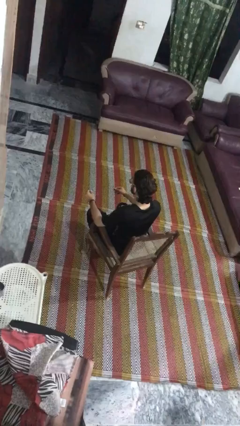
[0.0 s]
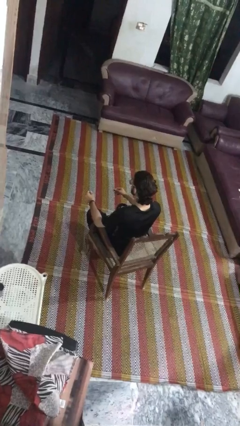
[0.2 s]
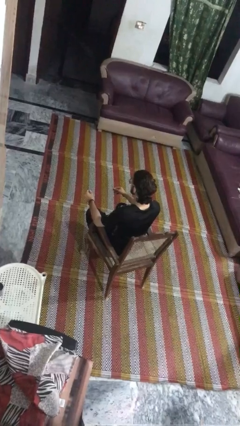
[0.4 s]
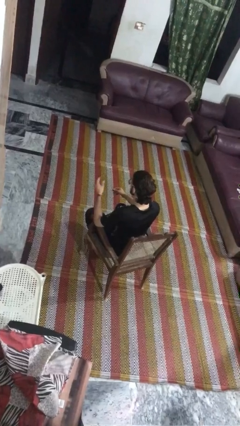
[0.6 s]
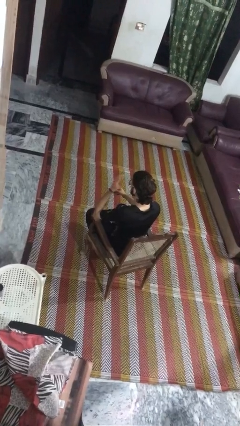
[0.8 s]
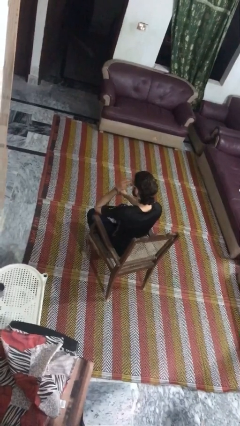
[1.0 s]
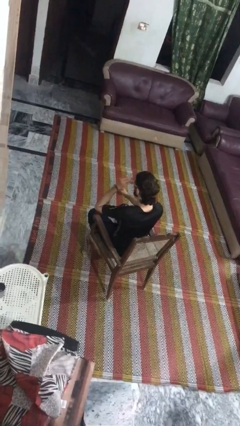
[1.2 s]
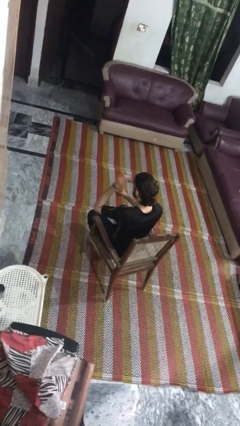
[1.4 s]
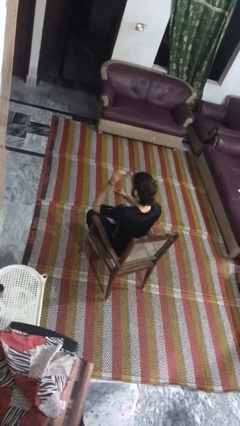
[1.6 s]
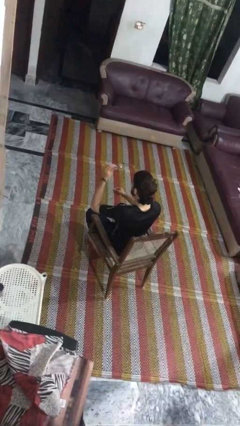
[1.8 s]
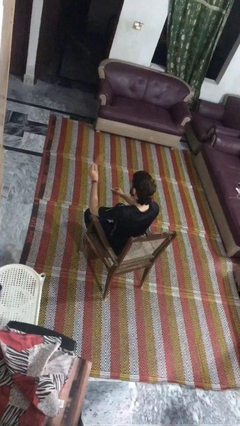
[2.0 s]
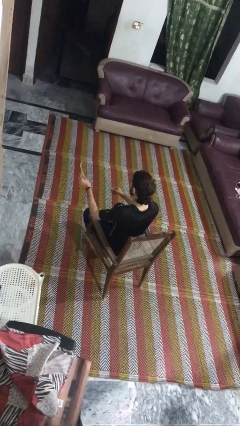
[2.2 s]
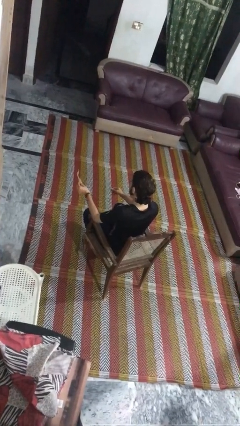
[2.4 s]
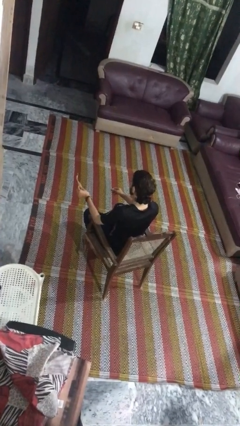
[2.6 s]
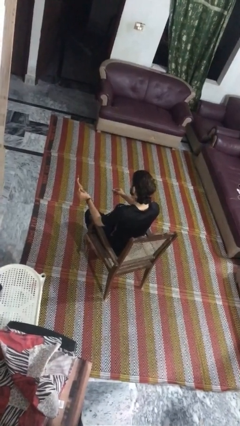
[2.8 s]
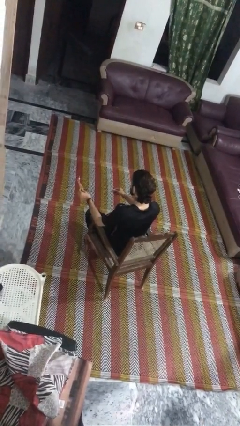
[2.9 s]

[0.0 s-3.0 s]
person takes off glasses

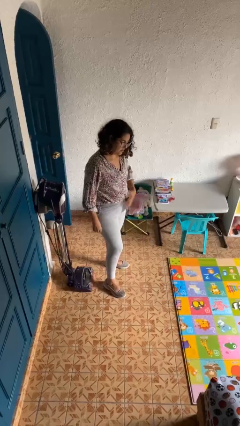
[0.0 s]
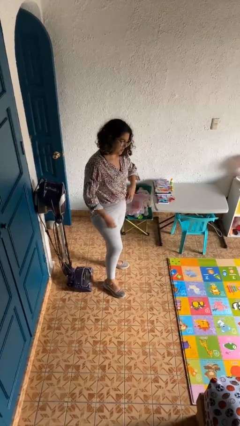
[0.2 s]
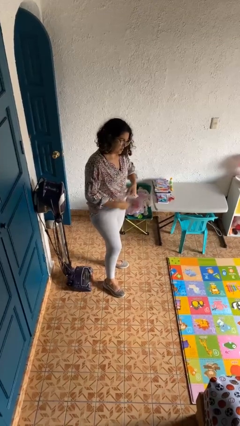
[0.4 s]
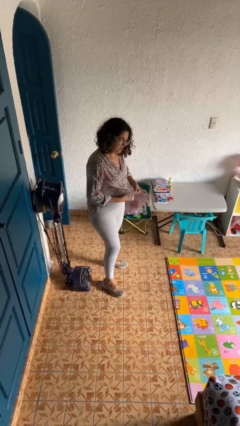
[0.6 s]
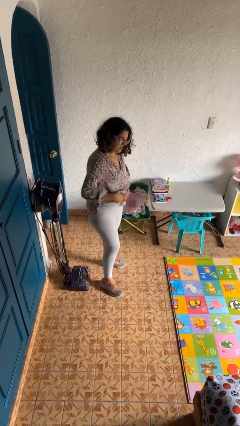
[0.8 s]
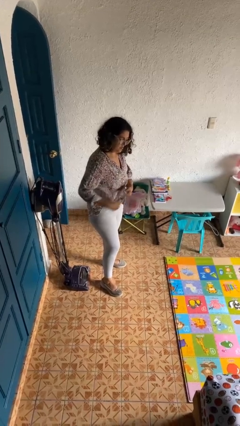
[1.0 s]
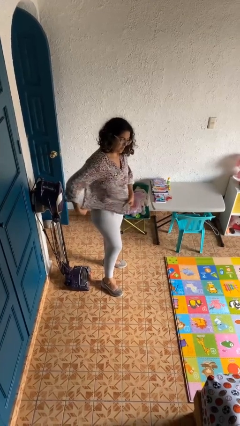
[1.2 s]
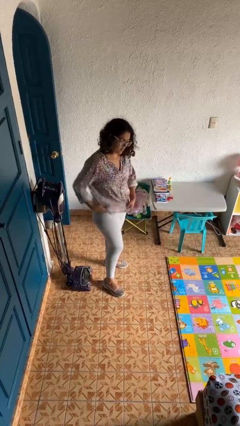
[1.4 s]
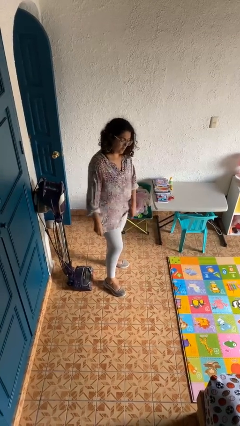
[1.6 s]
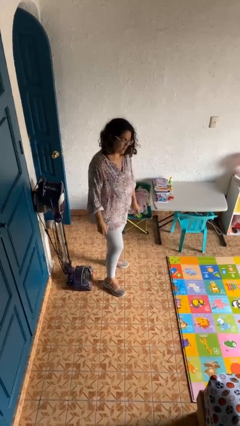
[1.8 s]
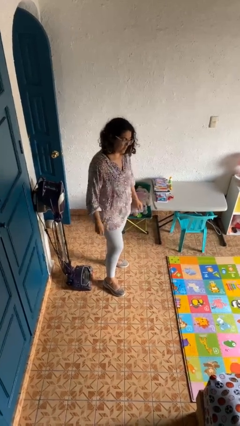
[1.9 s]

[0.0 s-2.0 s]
person untucks shirt

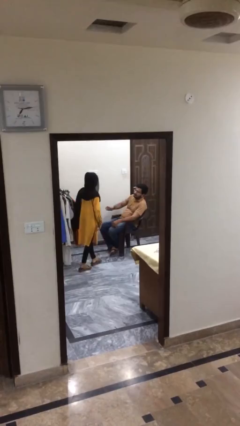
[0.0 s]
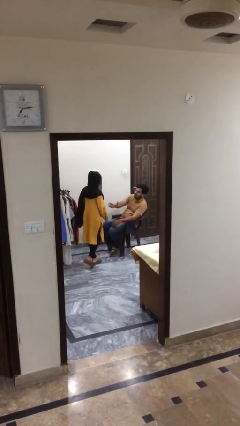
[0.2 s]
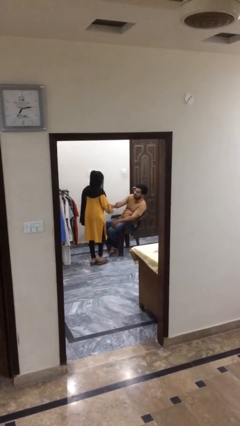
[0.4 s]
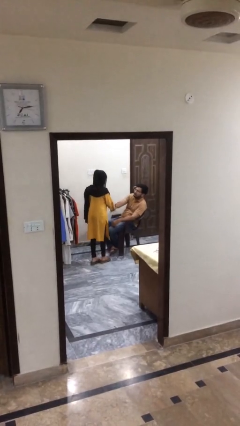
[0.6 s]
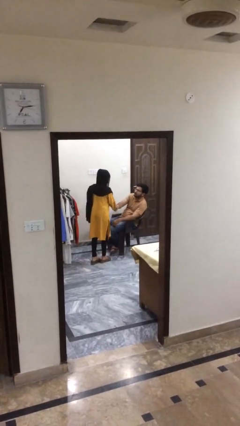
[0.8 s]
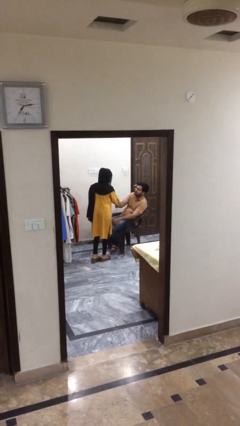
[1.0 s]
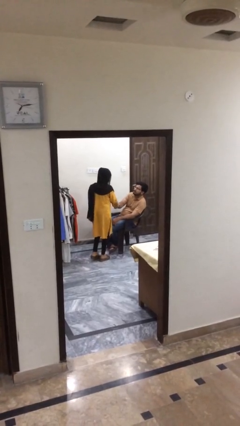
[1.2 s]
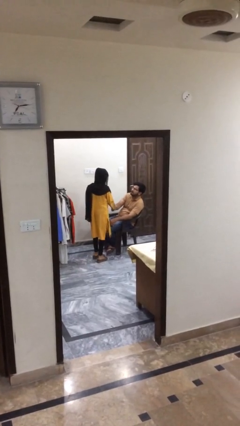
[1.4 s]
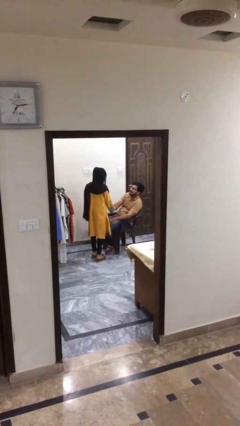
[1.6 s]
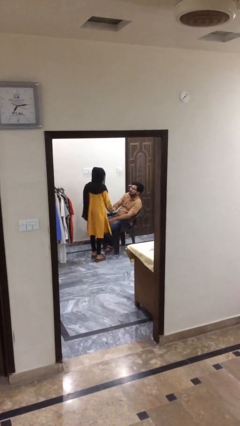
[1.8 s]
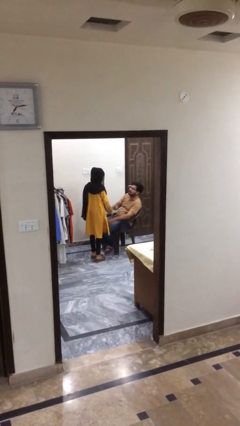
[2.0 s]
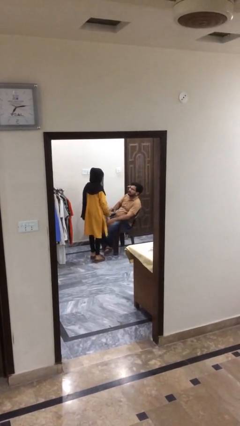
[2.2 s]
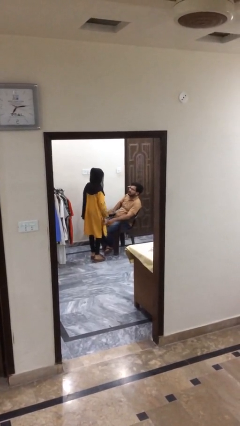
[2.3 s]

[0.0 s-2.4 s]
person shakes hand

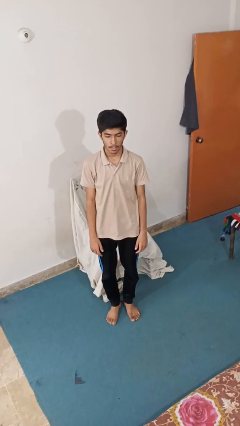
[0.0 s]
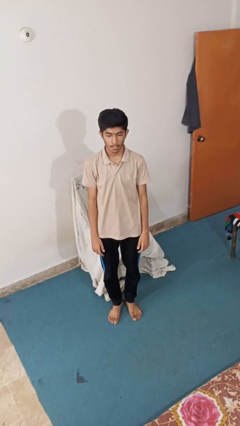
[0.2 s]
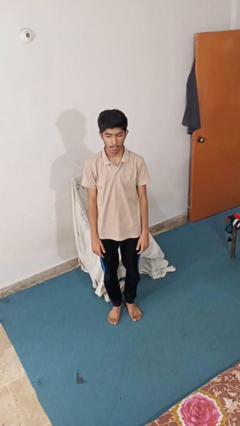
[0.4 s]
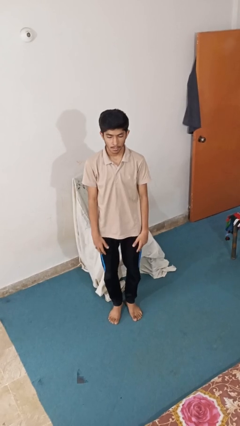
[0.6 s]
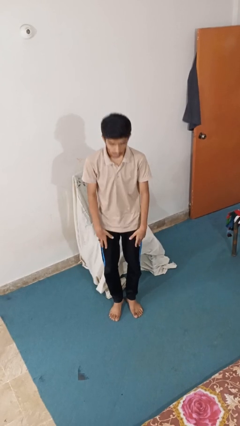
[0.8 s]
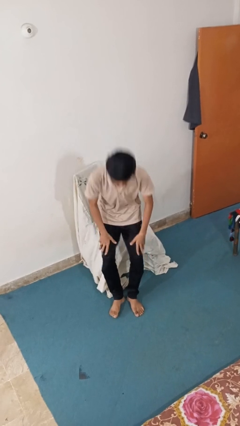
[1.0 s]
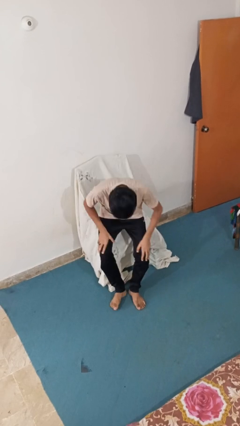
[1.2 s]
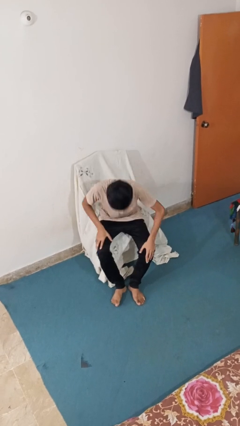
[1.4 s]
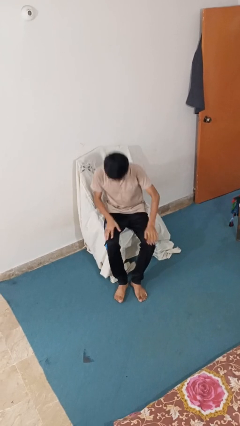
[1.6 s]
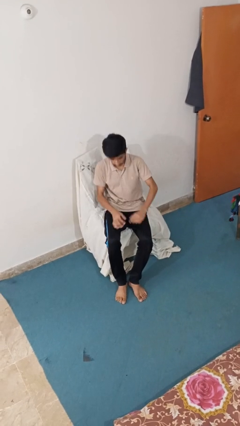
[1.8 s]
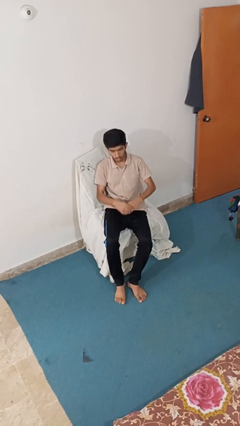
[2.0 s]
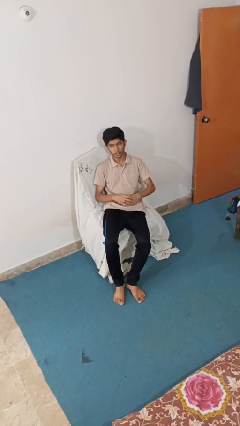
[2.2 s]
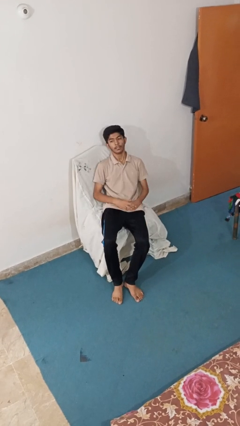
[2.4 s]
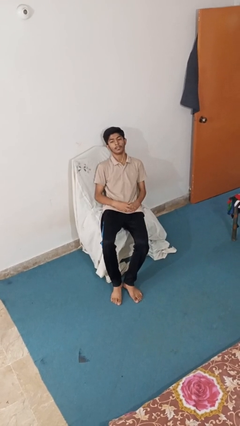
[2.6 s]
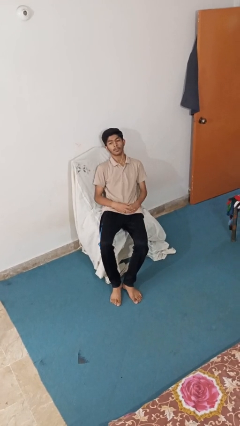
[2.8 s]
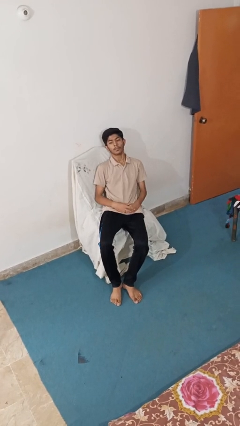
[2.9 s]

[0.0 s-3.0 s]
person lies down on couch

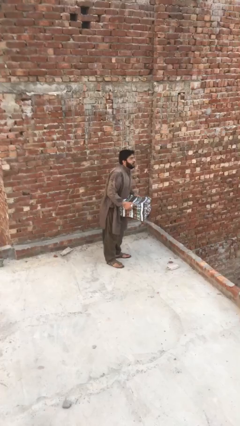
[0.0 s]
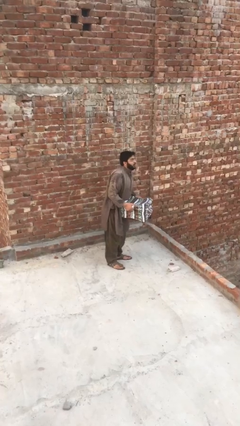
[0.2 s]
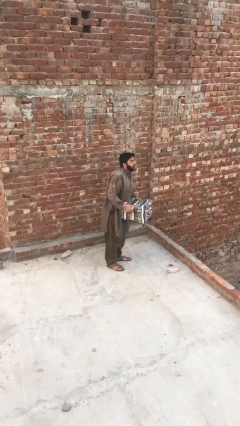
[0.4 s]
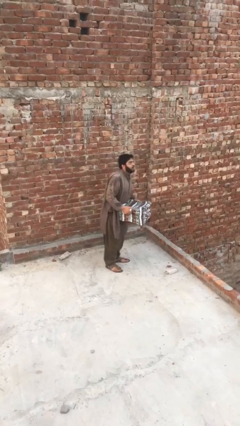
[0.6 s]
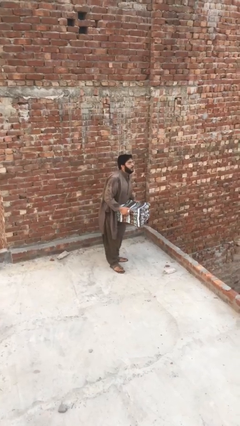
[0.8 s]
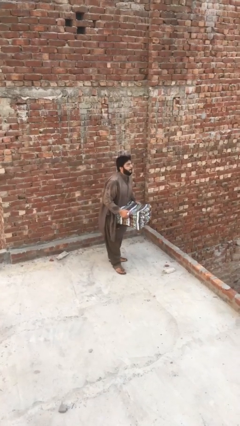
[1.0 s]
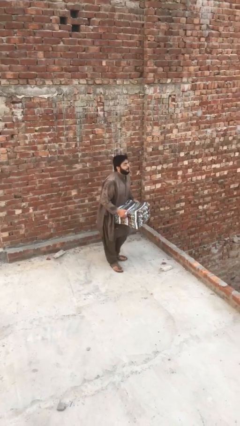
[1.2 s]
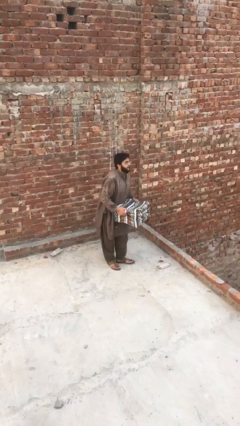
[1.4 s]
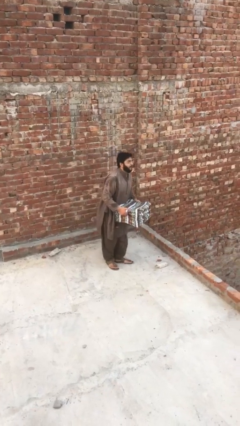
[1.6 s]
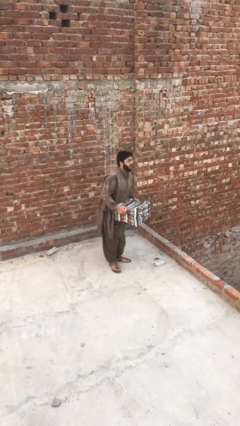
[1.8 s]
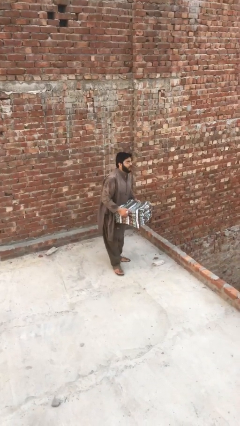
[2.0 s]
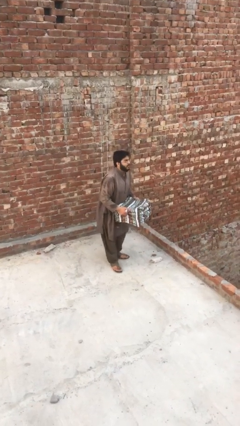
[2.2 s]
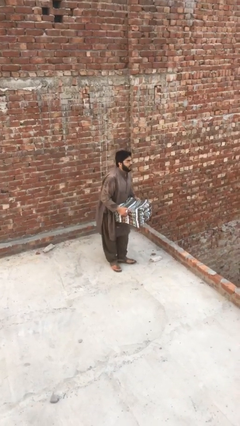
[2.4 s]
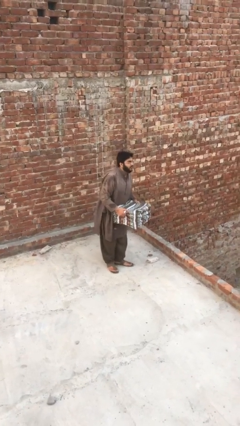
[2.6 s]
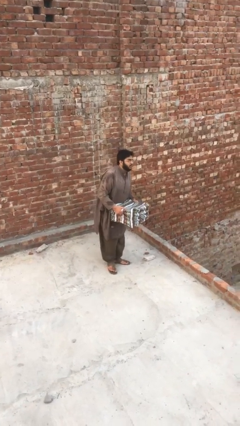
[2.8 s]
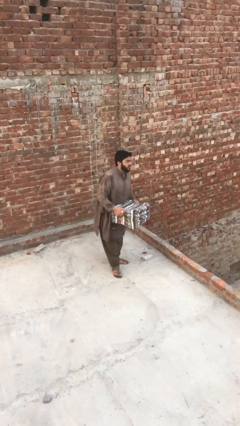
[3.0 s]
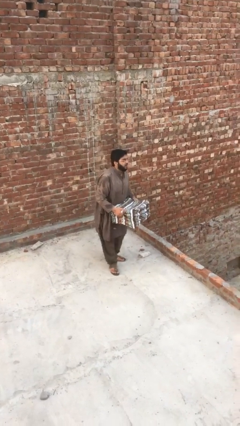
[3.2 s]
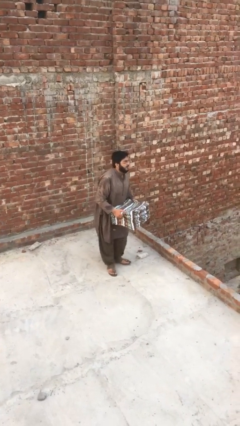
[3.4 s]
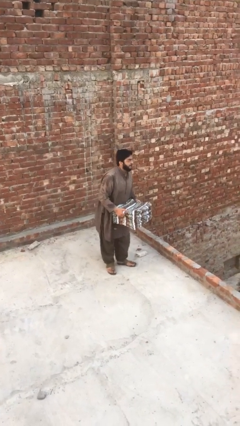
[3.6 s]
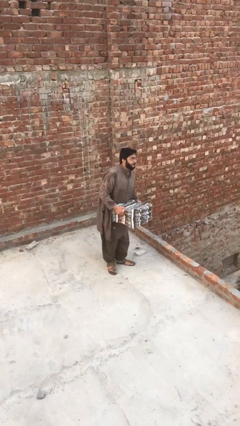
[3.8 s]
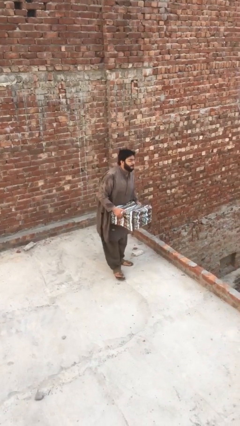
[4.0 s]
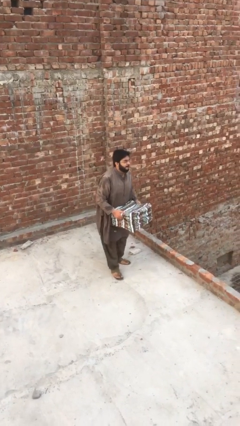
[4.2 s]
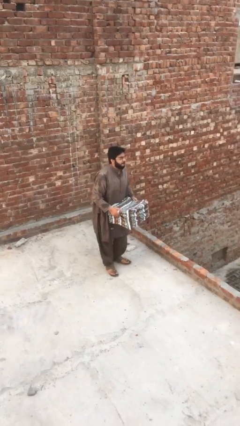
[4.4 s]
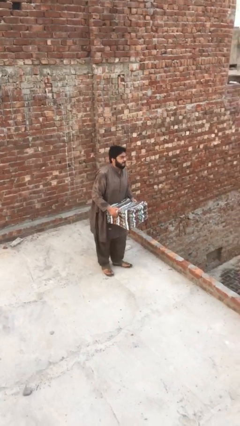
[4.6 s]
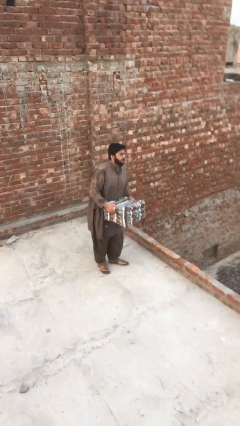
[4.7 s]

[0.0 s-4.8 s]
person carries heavy object

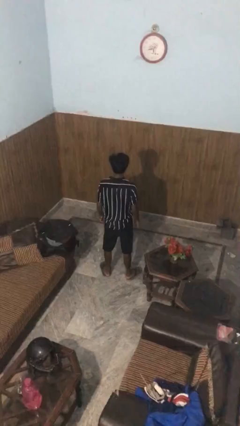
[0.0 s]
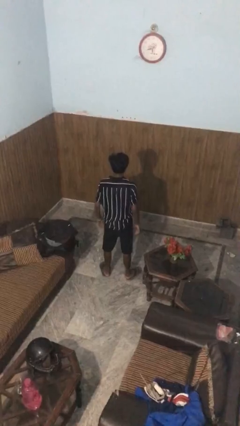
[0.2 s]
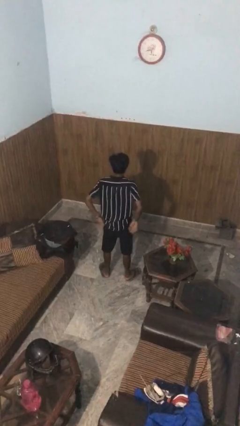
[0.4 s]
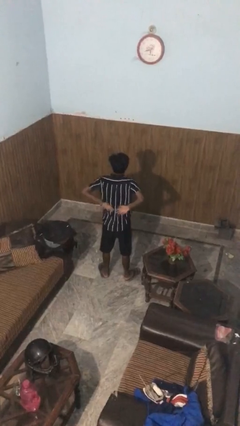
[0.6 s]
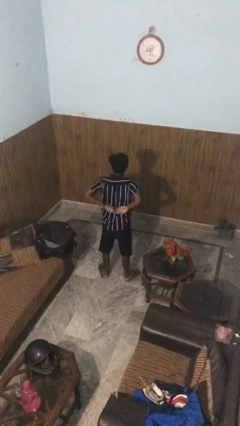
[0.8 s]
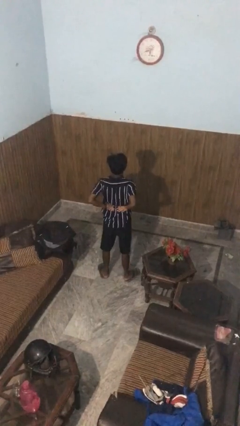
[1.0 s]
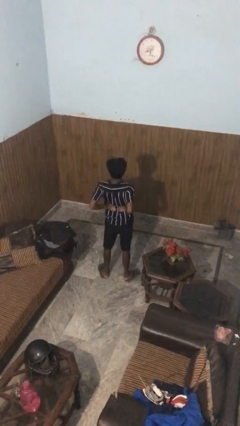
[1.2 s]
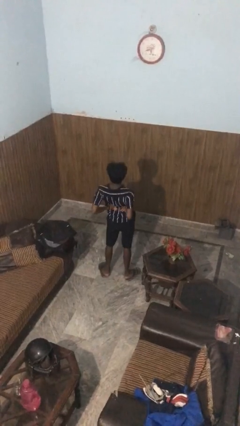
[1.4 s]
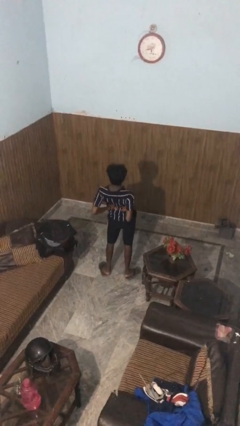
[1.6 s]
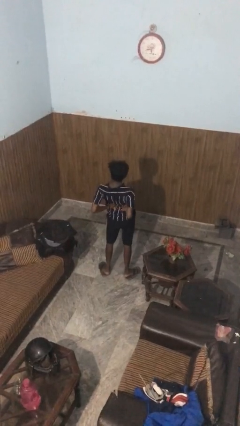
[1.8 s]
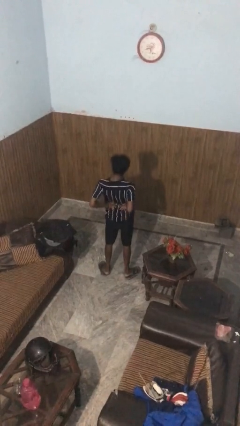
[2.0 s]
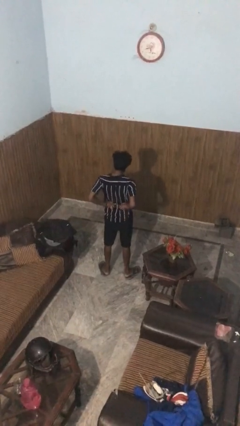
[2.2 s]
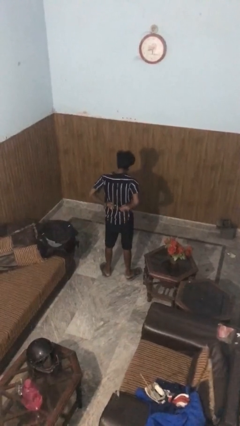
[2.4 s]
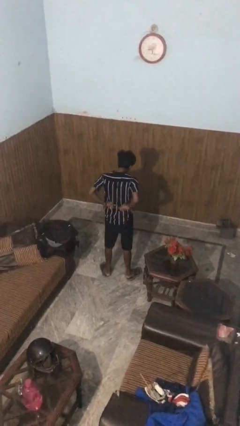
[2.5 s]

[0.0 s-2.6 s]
person stretches back
